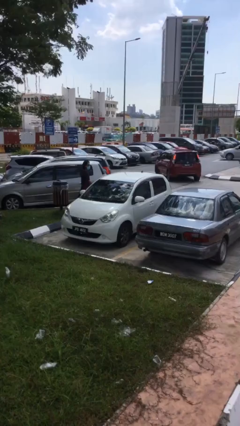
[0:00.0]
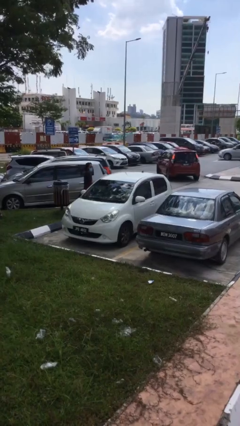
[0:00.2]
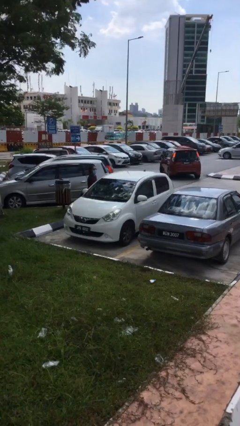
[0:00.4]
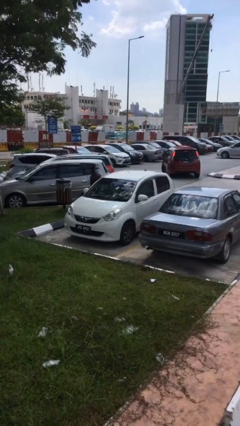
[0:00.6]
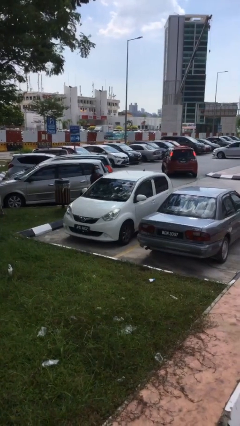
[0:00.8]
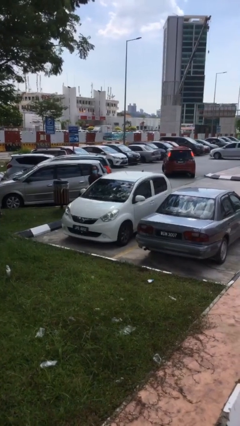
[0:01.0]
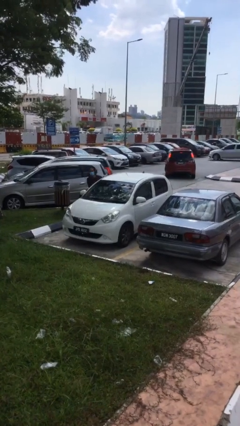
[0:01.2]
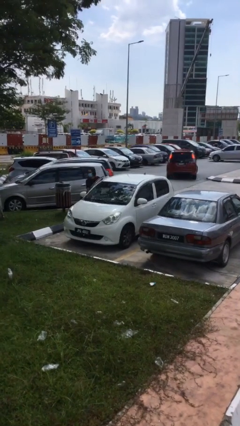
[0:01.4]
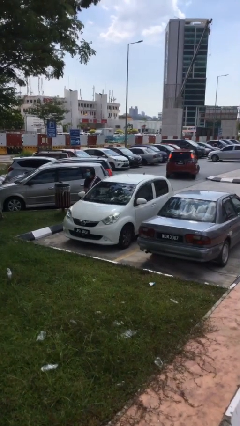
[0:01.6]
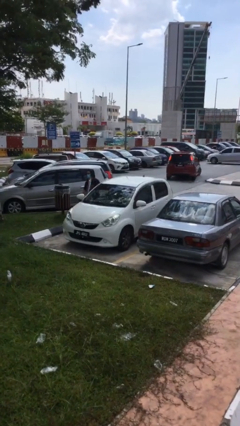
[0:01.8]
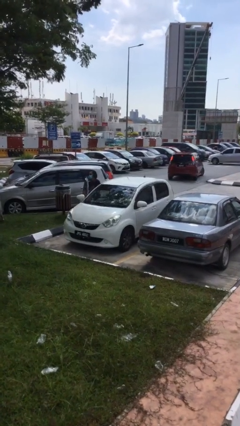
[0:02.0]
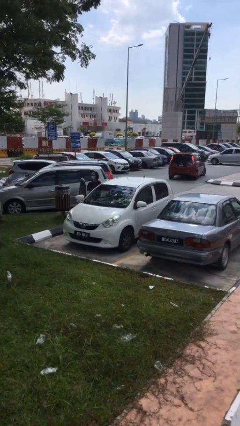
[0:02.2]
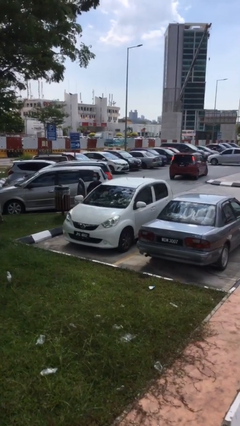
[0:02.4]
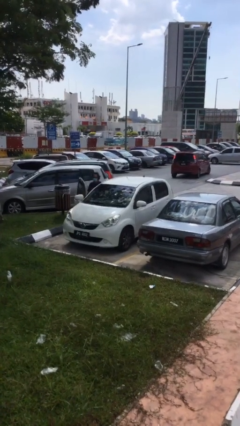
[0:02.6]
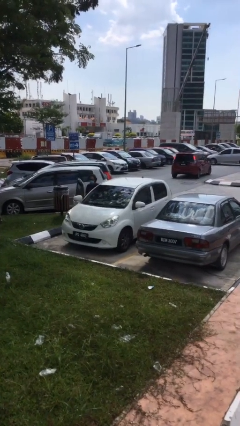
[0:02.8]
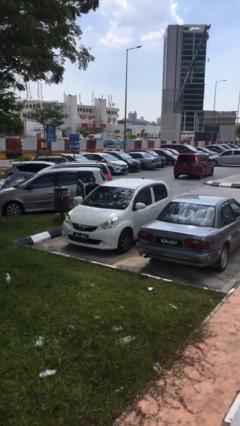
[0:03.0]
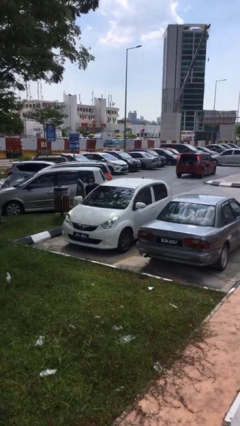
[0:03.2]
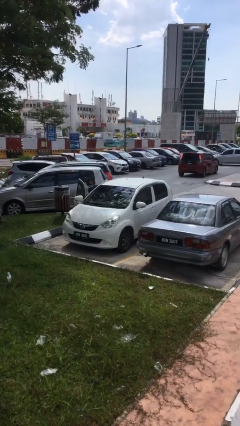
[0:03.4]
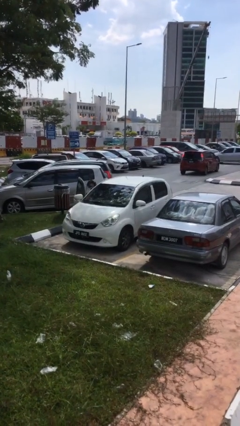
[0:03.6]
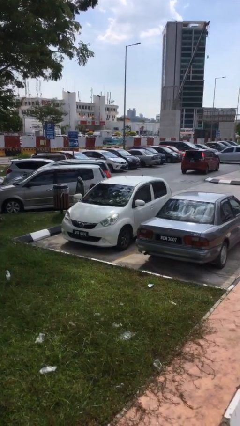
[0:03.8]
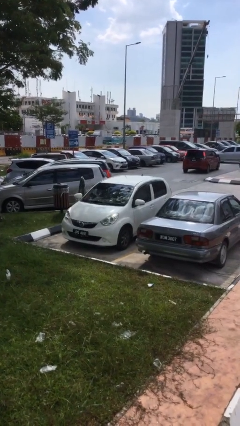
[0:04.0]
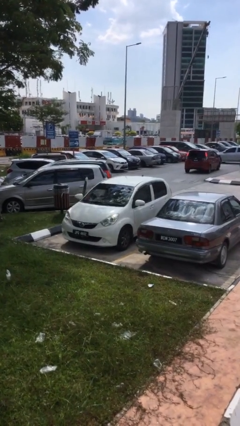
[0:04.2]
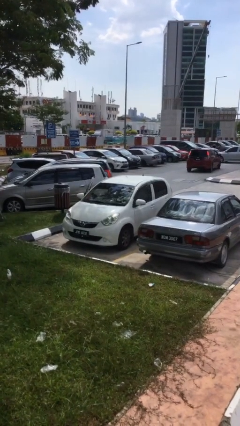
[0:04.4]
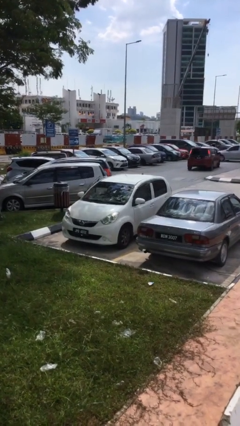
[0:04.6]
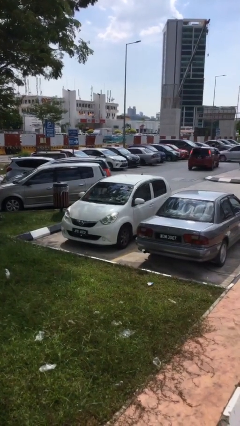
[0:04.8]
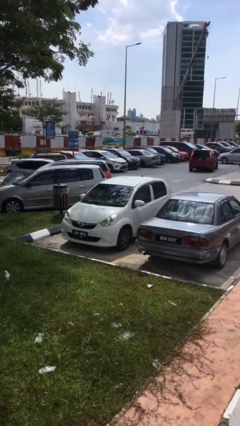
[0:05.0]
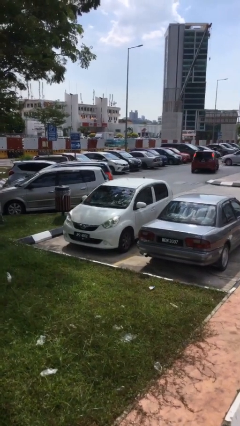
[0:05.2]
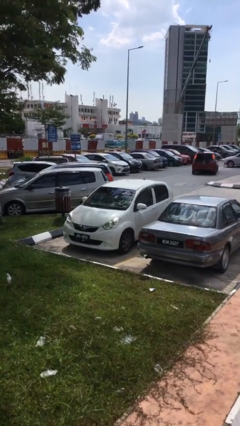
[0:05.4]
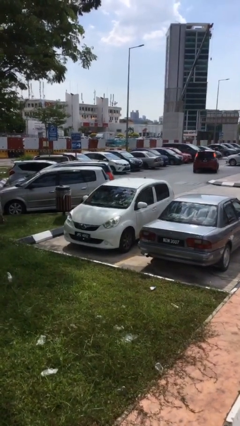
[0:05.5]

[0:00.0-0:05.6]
car picks up person

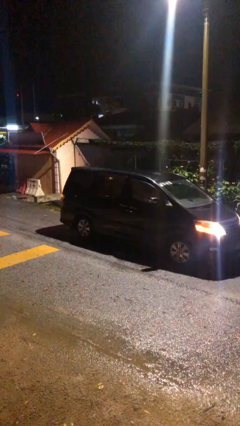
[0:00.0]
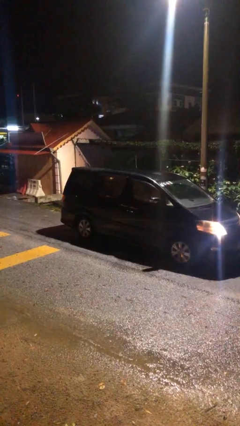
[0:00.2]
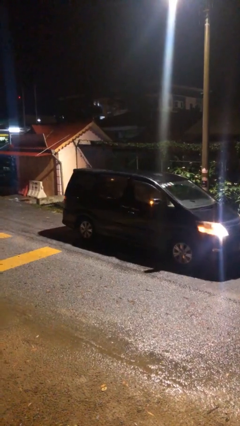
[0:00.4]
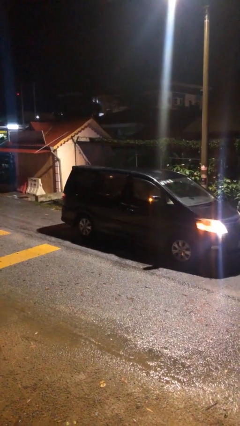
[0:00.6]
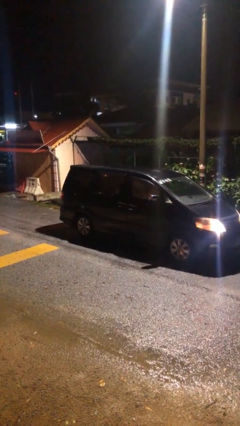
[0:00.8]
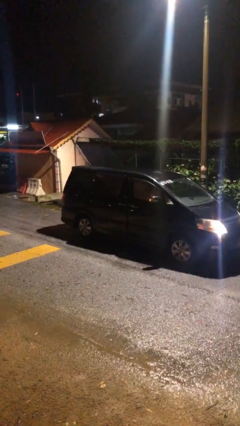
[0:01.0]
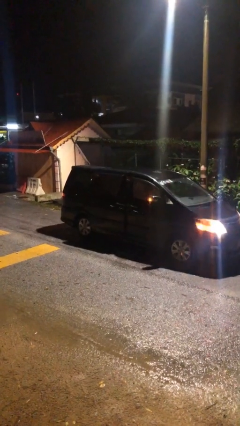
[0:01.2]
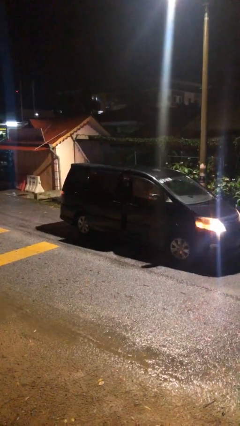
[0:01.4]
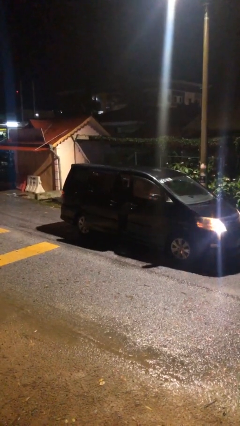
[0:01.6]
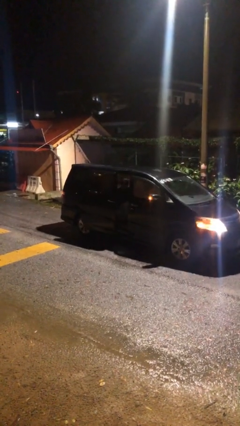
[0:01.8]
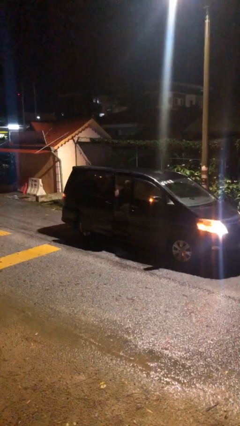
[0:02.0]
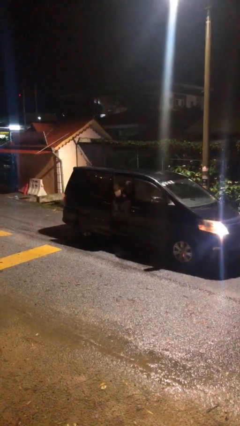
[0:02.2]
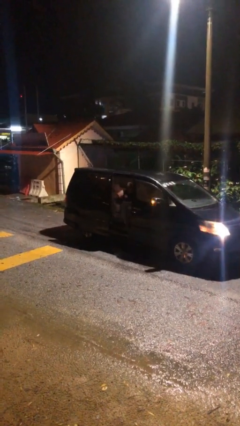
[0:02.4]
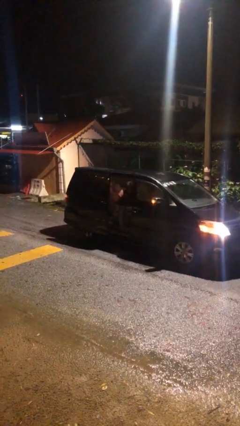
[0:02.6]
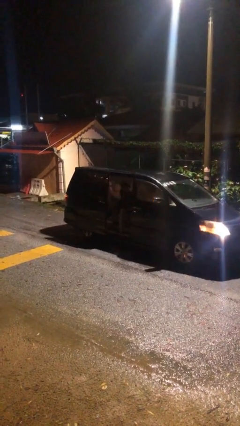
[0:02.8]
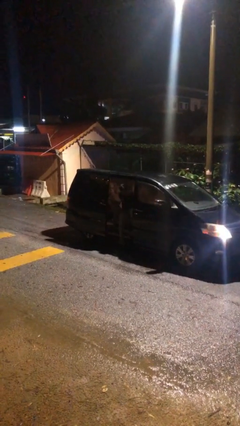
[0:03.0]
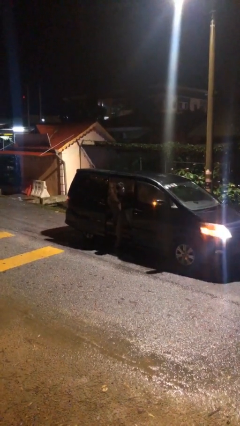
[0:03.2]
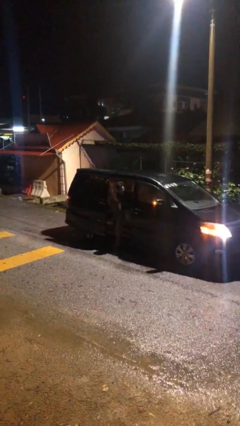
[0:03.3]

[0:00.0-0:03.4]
person opens car door

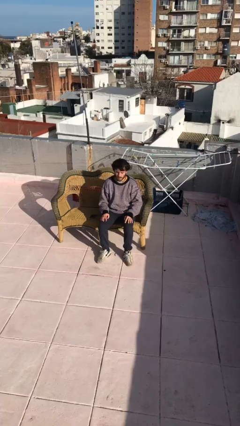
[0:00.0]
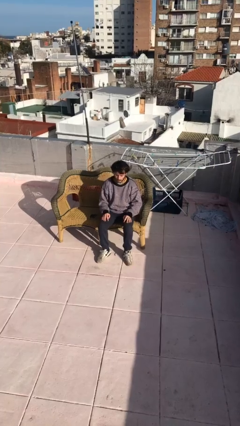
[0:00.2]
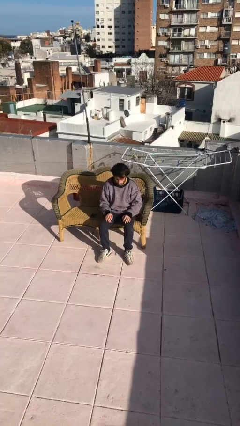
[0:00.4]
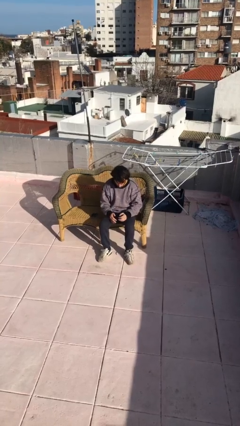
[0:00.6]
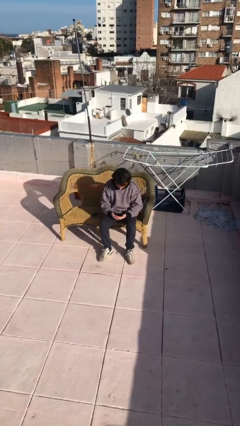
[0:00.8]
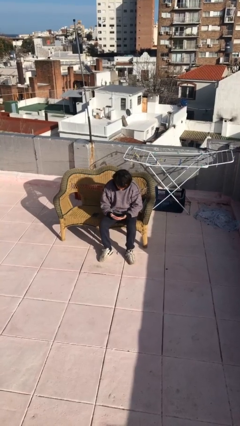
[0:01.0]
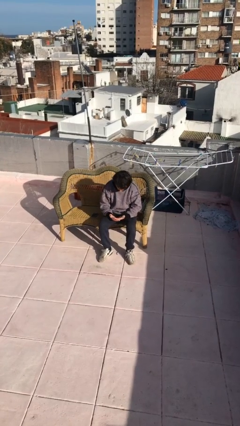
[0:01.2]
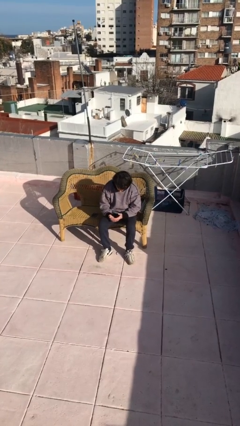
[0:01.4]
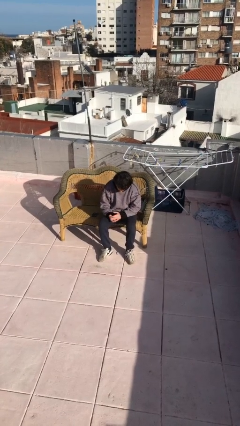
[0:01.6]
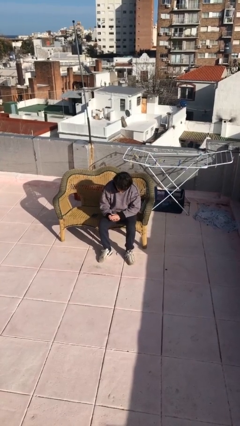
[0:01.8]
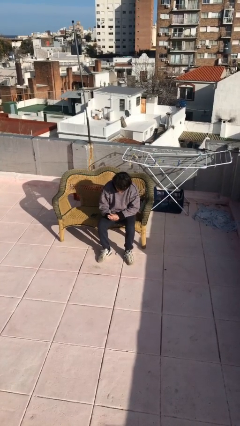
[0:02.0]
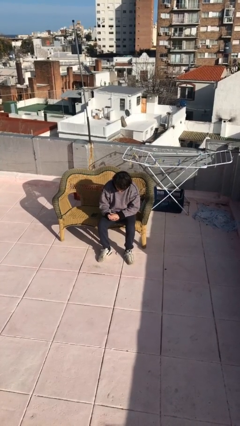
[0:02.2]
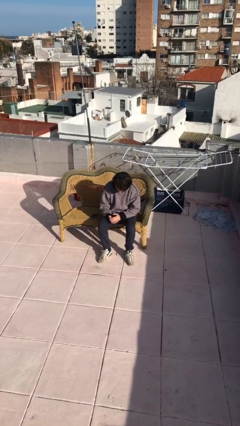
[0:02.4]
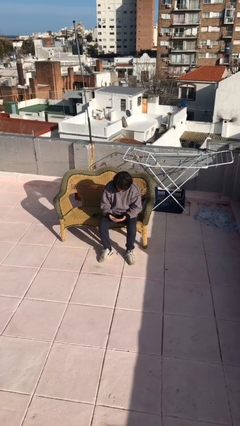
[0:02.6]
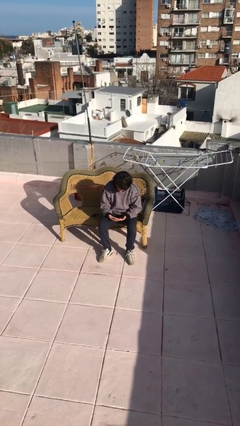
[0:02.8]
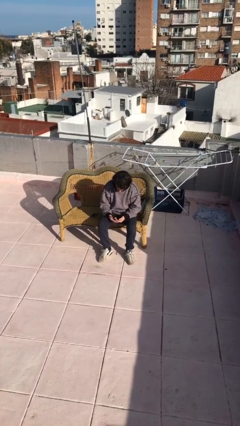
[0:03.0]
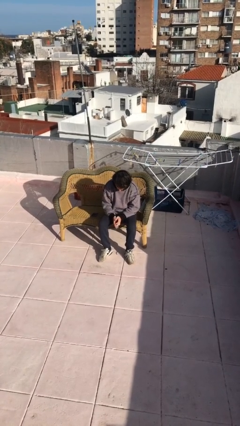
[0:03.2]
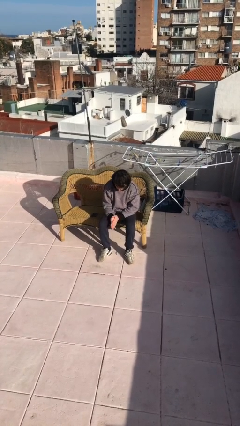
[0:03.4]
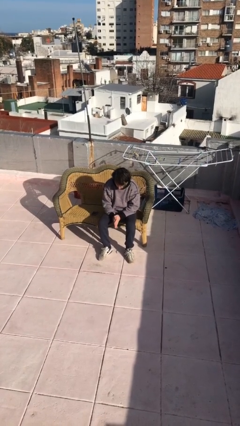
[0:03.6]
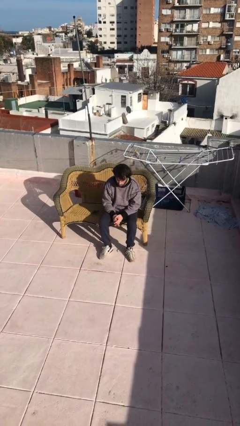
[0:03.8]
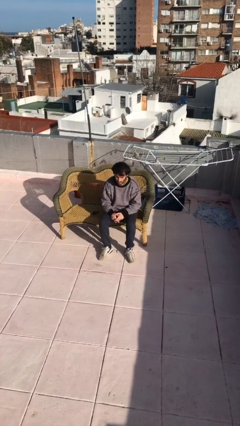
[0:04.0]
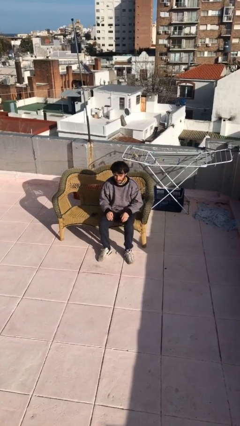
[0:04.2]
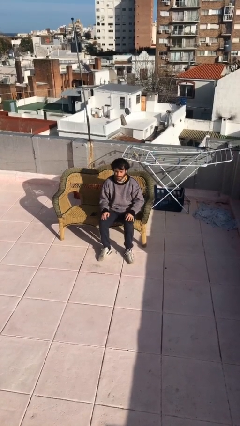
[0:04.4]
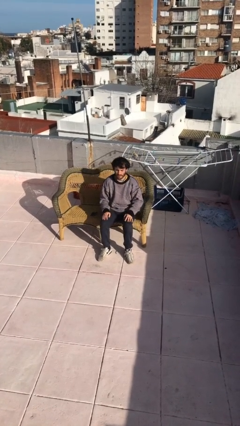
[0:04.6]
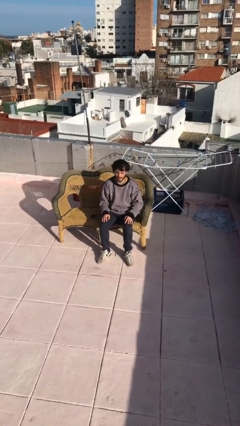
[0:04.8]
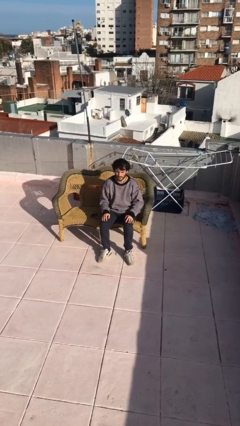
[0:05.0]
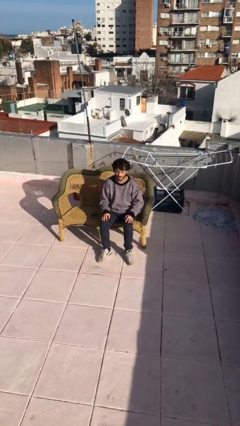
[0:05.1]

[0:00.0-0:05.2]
person looks at hands in lap

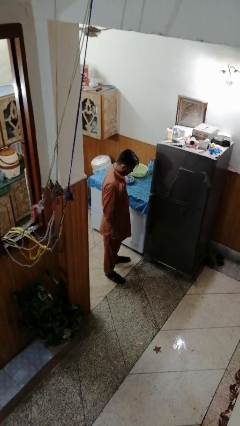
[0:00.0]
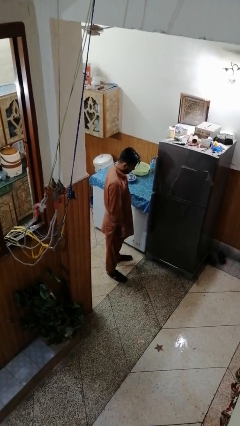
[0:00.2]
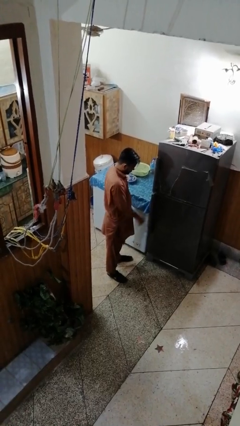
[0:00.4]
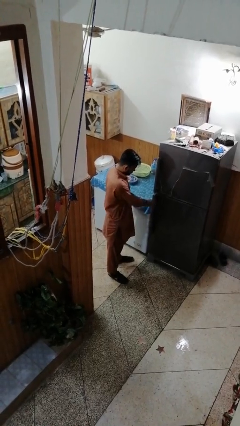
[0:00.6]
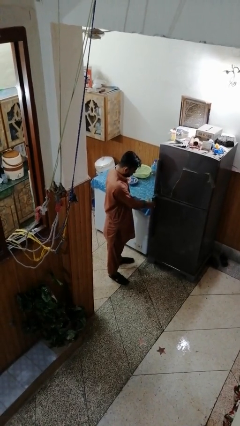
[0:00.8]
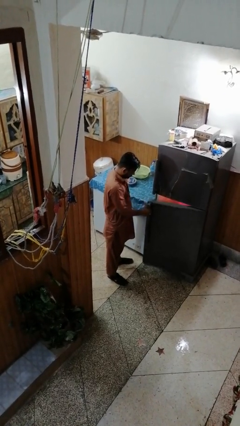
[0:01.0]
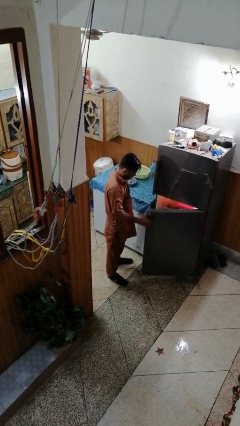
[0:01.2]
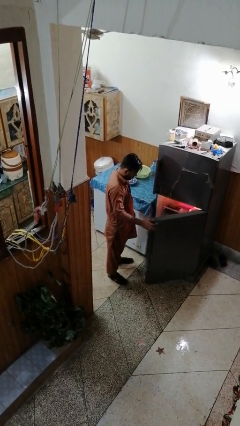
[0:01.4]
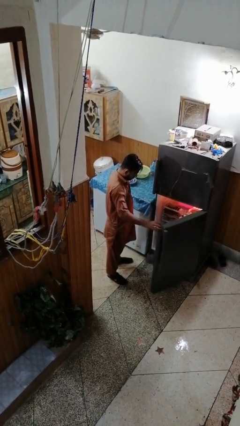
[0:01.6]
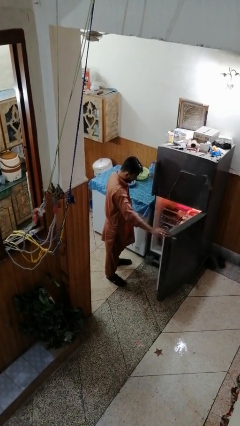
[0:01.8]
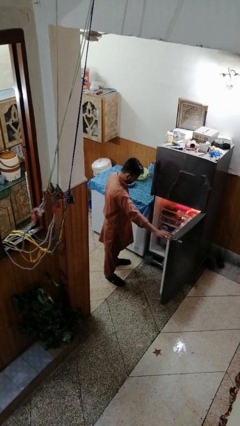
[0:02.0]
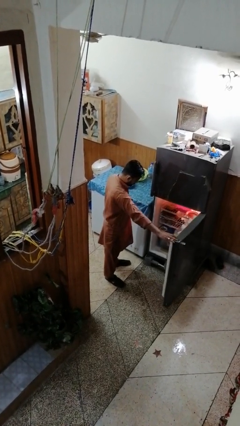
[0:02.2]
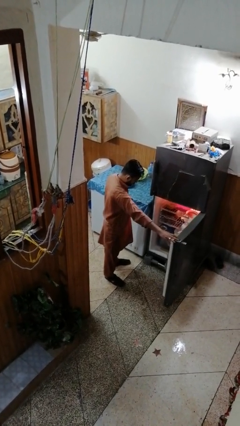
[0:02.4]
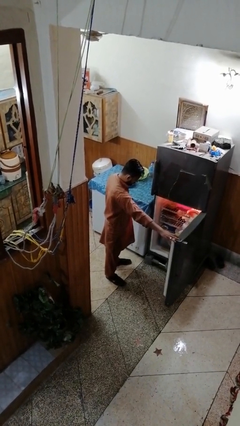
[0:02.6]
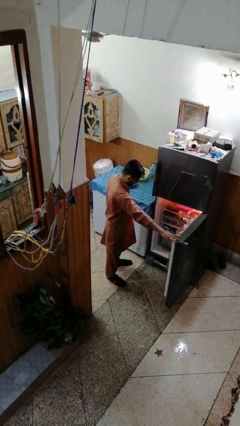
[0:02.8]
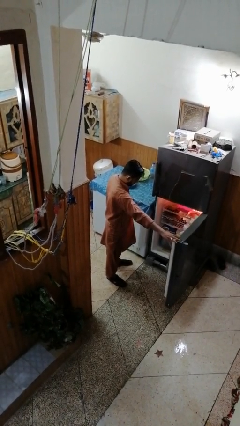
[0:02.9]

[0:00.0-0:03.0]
person opens refrigerator

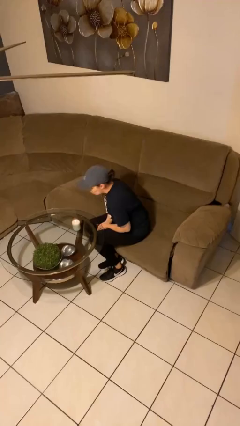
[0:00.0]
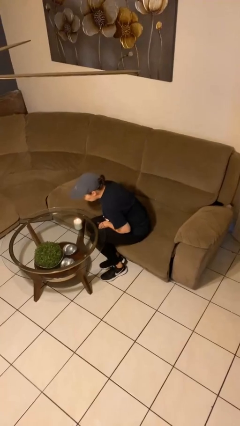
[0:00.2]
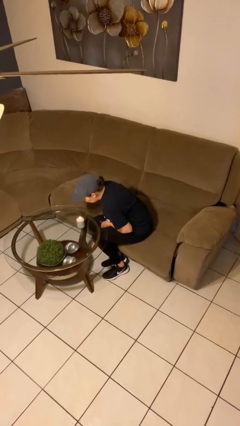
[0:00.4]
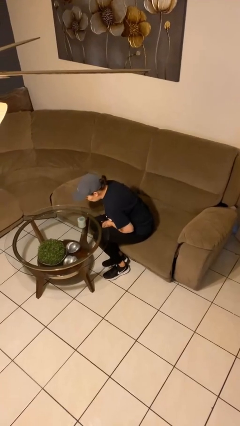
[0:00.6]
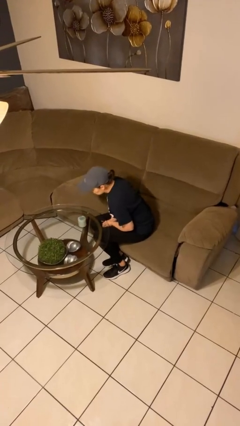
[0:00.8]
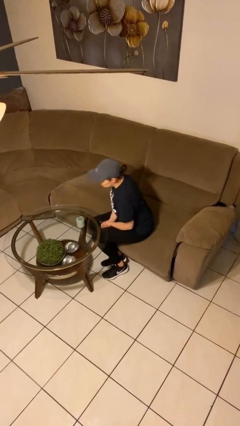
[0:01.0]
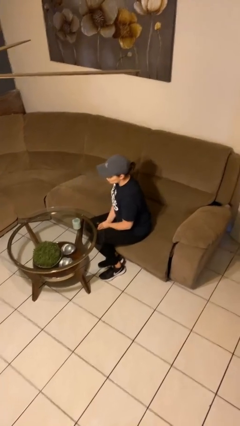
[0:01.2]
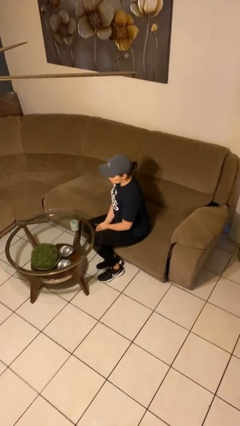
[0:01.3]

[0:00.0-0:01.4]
person extinguishes candle
